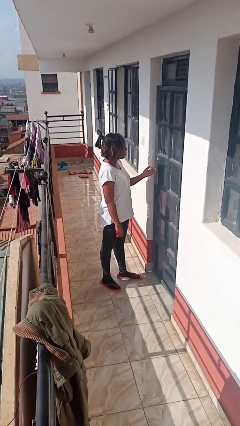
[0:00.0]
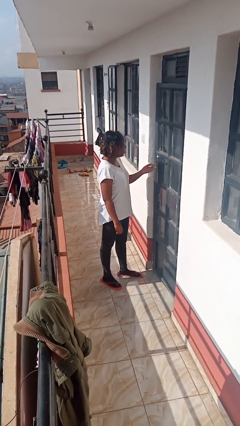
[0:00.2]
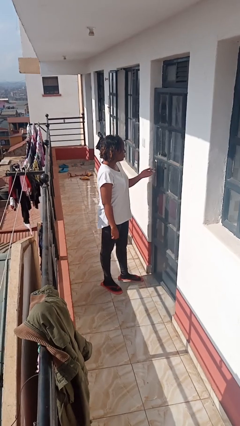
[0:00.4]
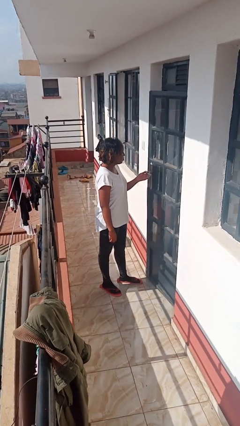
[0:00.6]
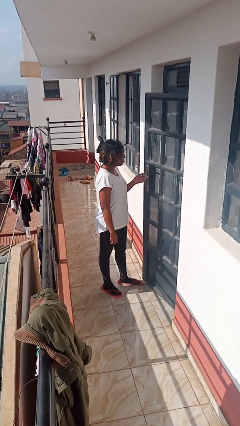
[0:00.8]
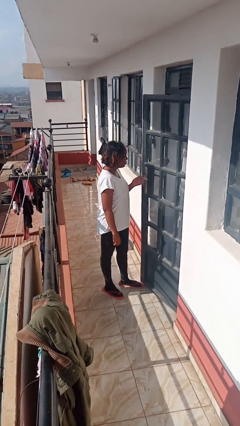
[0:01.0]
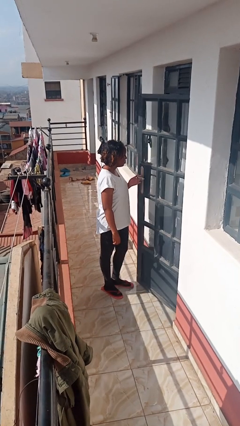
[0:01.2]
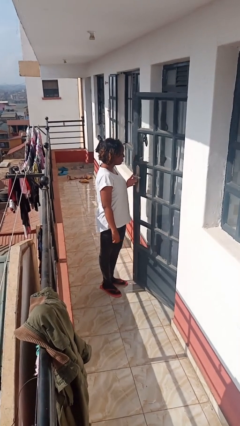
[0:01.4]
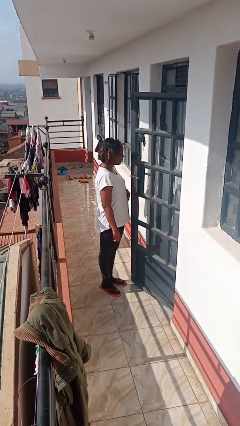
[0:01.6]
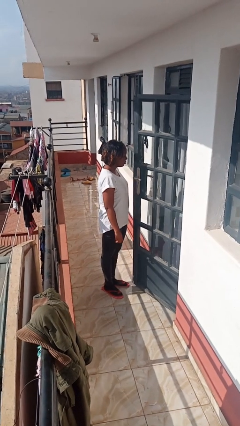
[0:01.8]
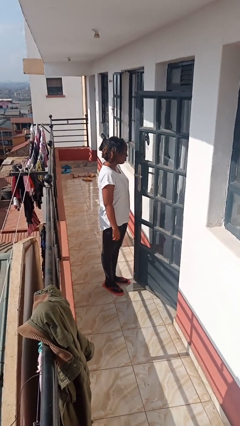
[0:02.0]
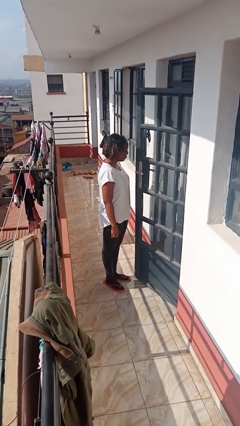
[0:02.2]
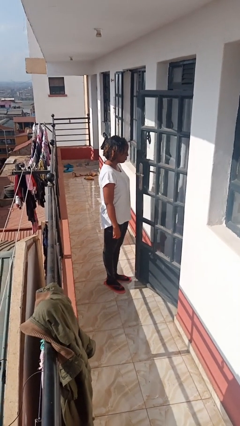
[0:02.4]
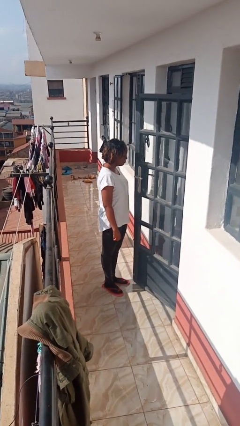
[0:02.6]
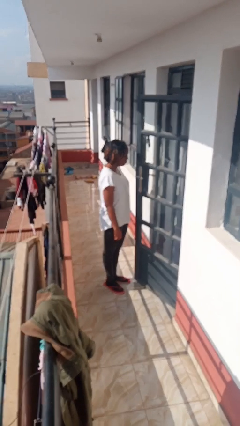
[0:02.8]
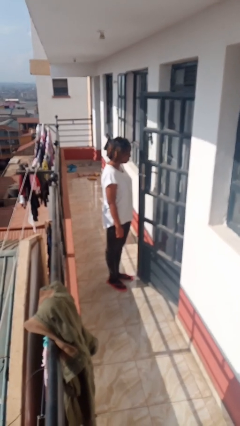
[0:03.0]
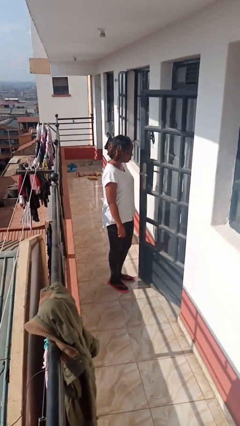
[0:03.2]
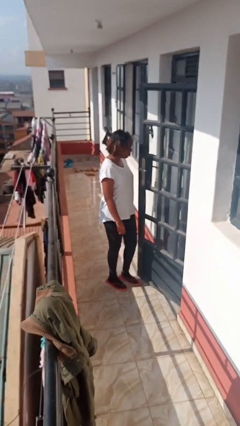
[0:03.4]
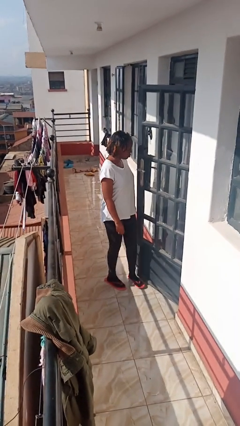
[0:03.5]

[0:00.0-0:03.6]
person opens facility door

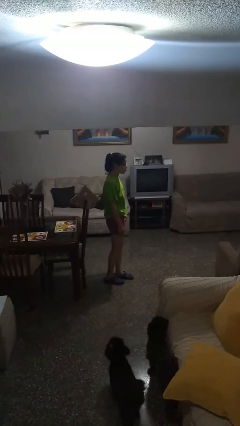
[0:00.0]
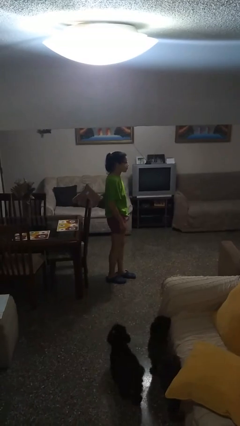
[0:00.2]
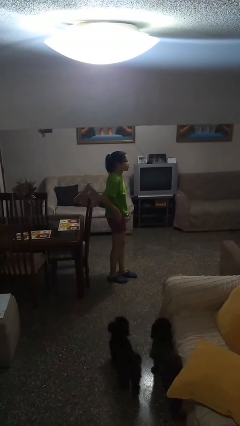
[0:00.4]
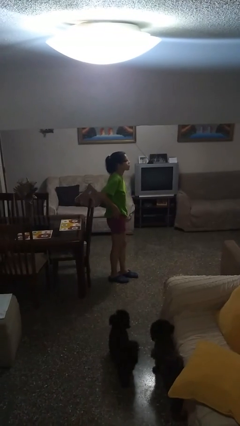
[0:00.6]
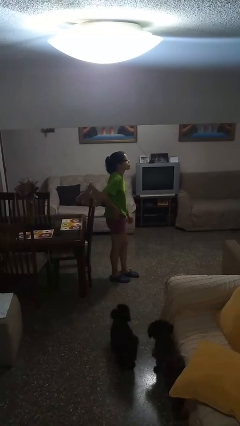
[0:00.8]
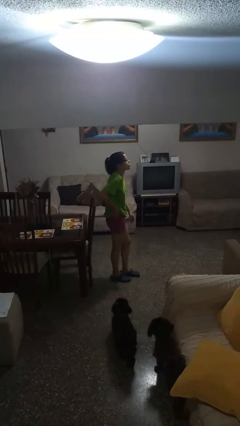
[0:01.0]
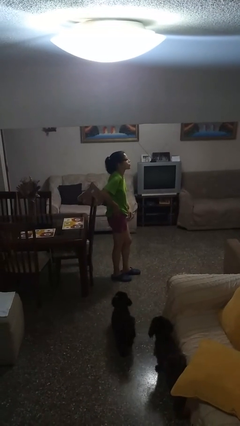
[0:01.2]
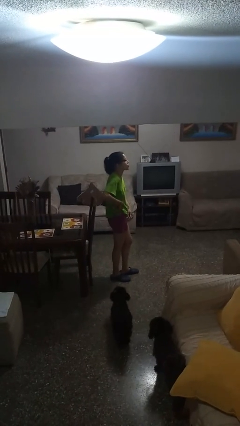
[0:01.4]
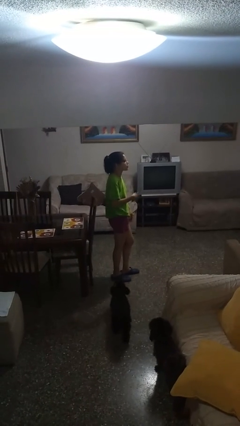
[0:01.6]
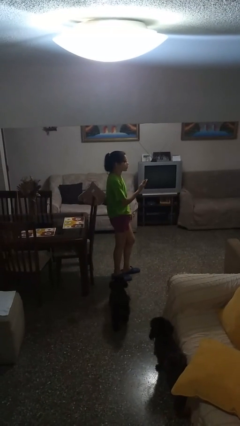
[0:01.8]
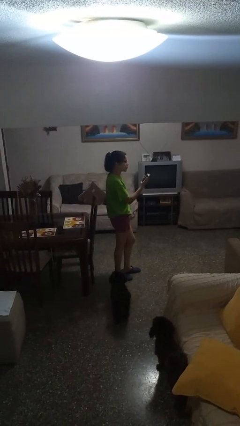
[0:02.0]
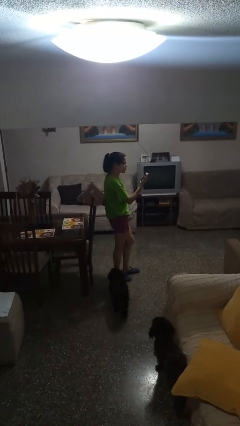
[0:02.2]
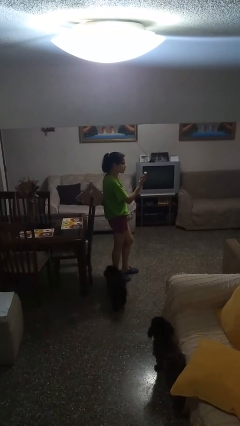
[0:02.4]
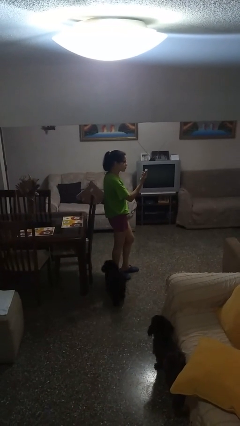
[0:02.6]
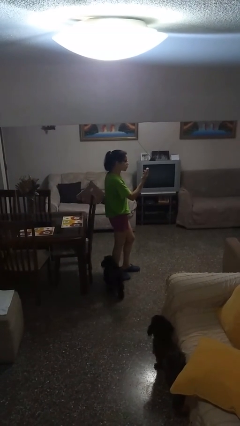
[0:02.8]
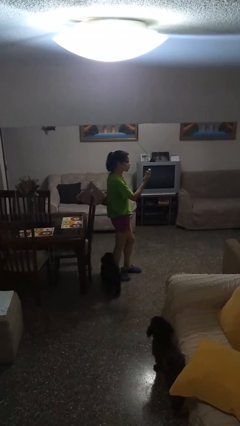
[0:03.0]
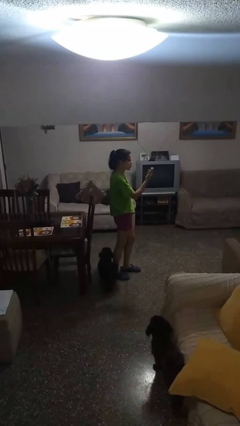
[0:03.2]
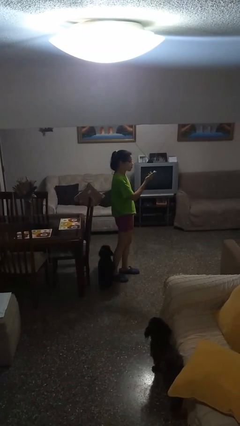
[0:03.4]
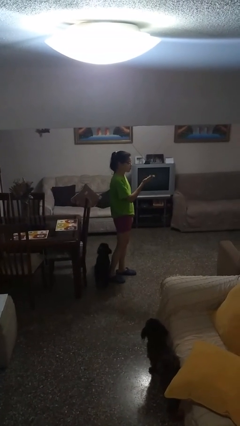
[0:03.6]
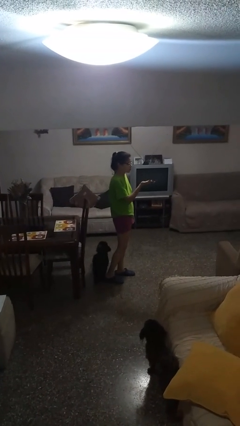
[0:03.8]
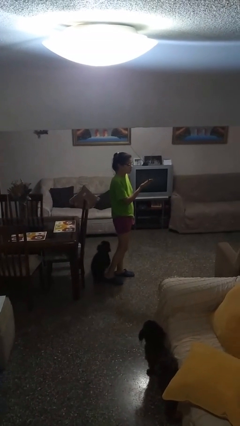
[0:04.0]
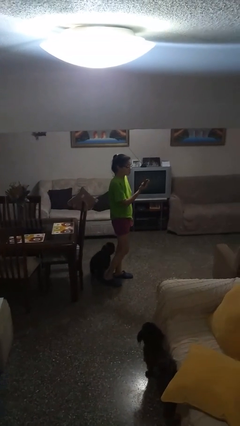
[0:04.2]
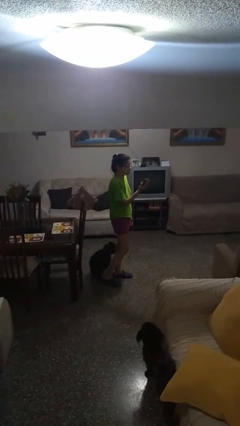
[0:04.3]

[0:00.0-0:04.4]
person takes phone from pocket

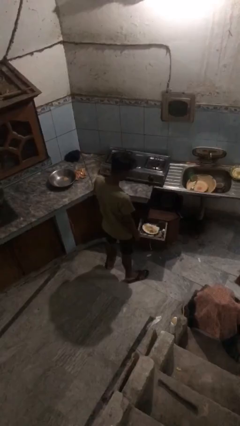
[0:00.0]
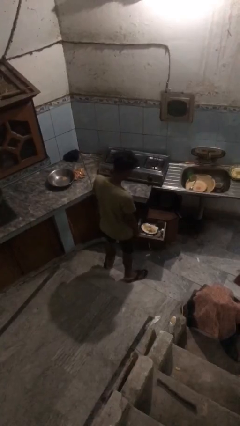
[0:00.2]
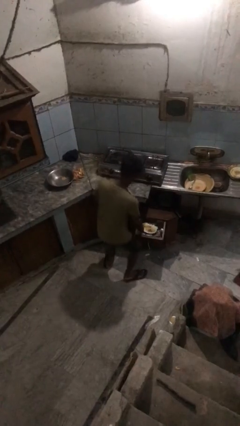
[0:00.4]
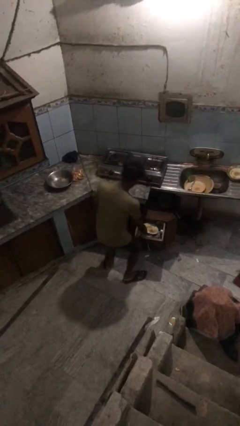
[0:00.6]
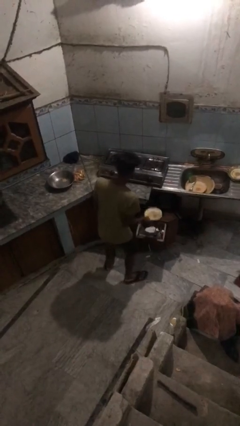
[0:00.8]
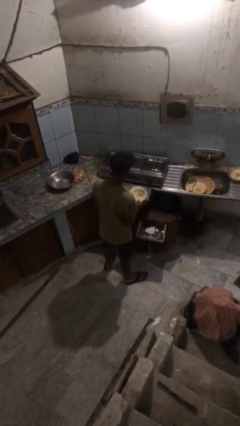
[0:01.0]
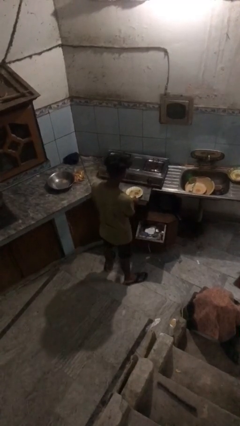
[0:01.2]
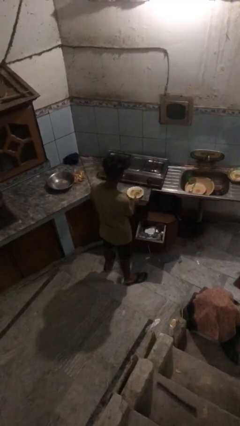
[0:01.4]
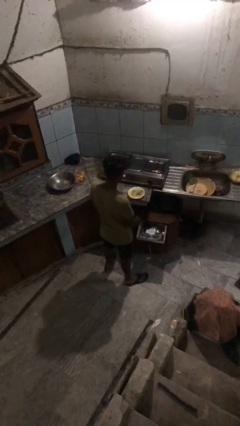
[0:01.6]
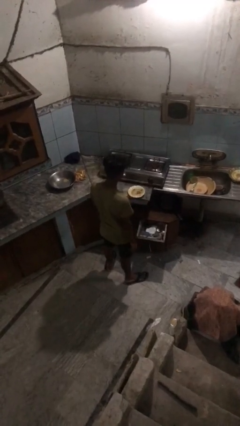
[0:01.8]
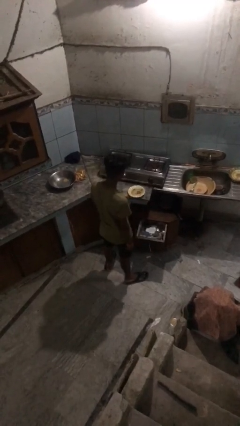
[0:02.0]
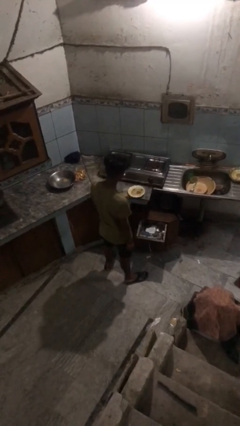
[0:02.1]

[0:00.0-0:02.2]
person takes object from kitchen drawer

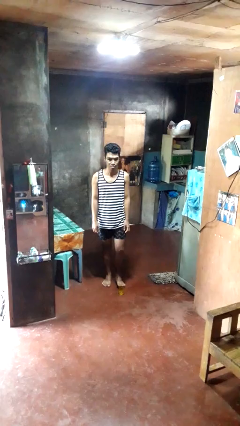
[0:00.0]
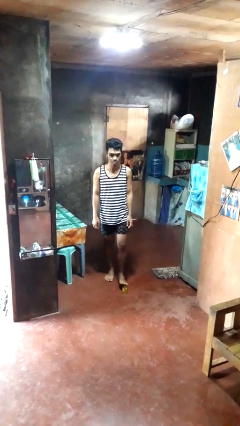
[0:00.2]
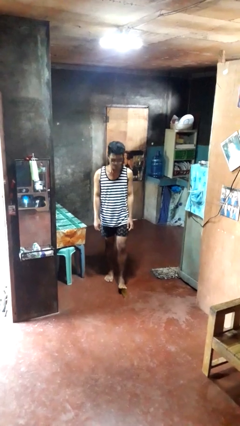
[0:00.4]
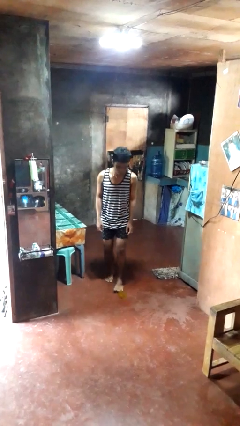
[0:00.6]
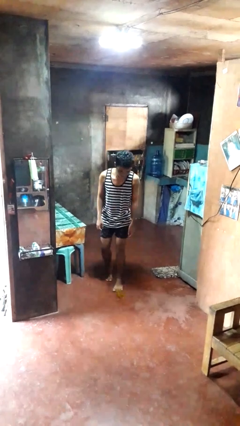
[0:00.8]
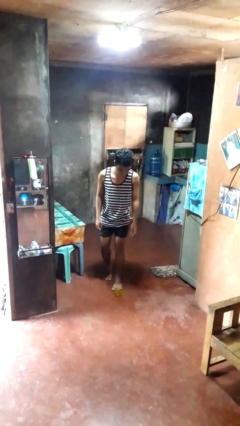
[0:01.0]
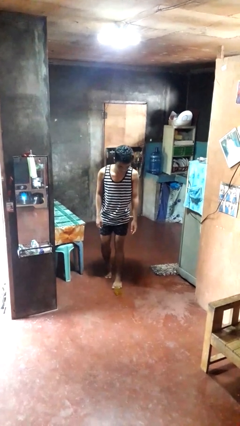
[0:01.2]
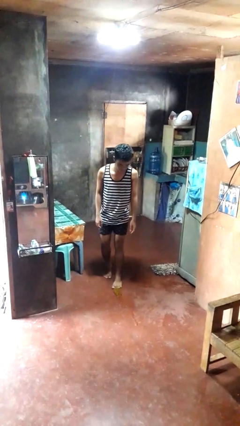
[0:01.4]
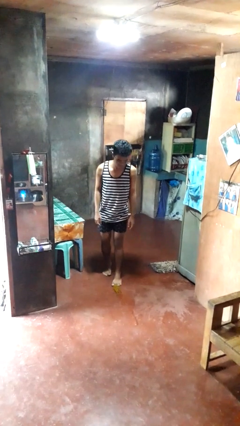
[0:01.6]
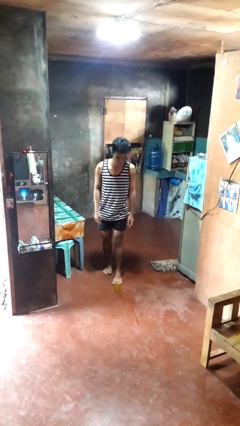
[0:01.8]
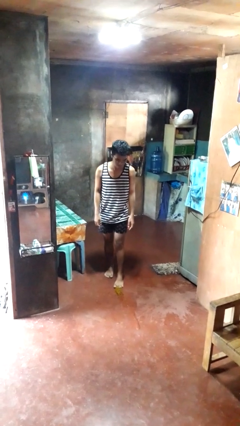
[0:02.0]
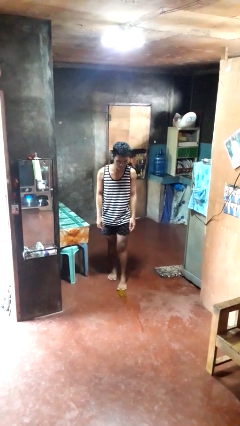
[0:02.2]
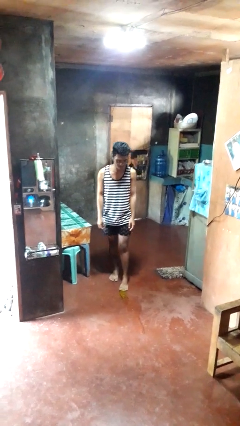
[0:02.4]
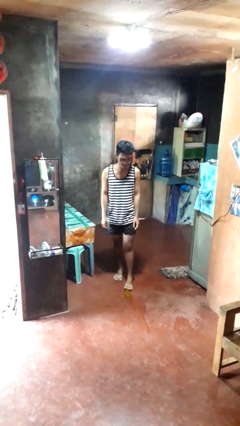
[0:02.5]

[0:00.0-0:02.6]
person spills on floor

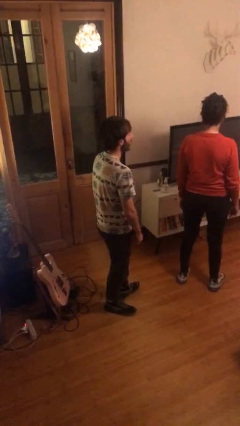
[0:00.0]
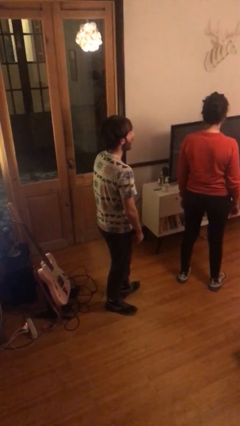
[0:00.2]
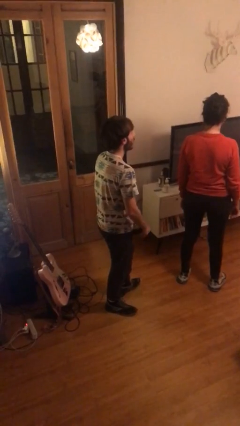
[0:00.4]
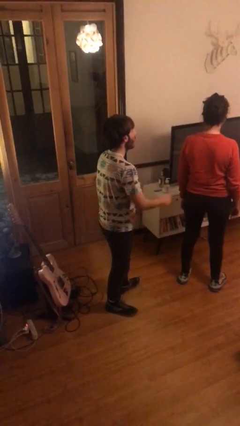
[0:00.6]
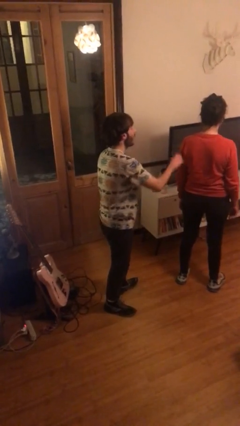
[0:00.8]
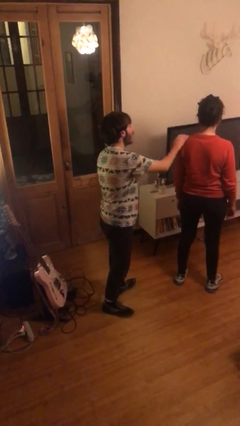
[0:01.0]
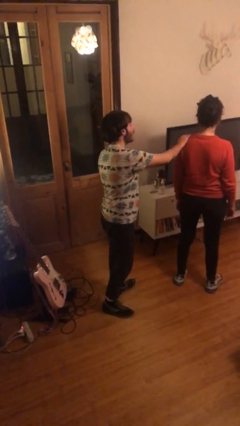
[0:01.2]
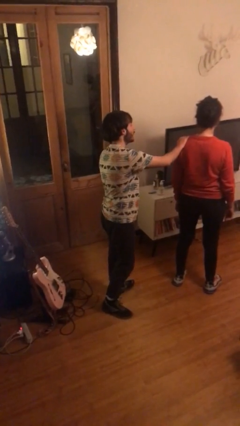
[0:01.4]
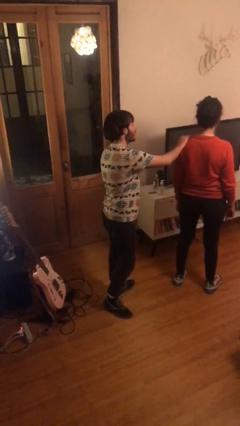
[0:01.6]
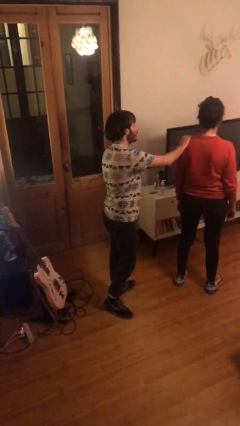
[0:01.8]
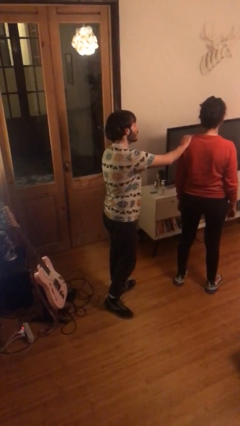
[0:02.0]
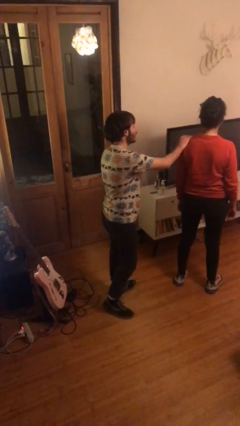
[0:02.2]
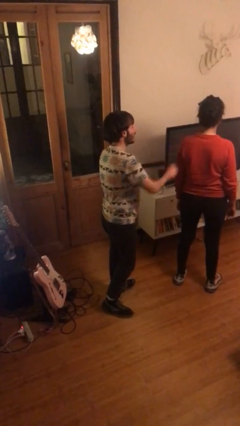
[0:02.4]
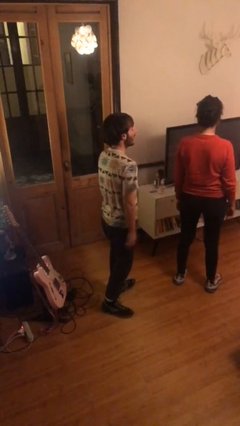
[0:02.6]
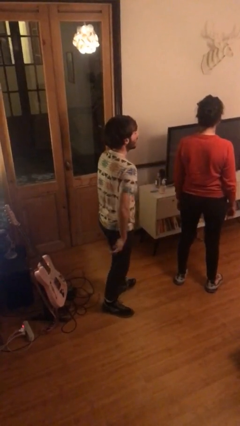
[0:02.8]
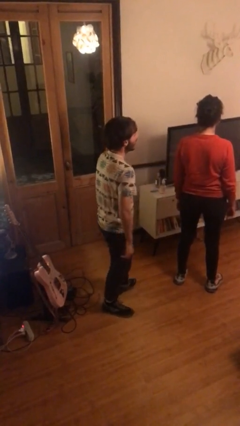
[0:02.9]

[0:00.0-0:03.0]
person touches back of person

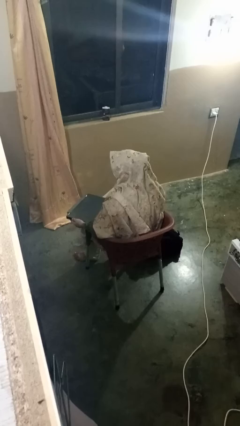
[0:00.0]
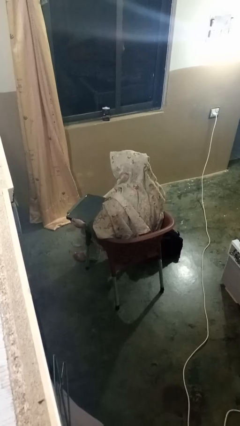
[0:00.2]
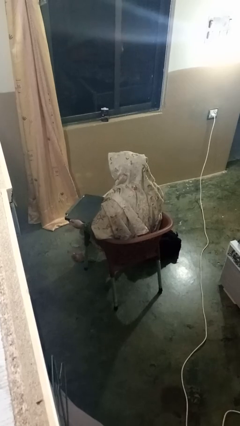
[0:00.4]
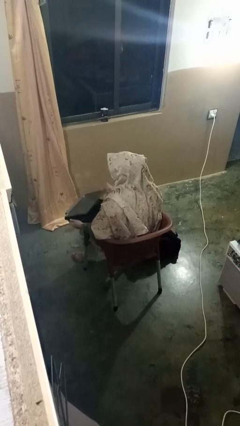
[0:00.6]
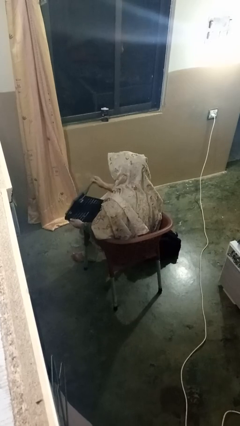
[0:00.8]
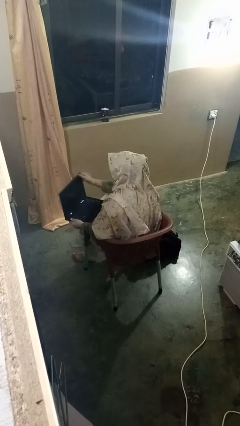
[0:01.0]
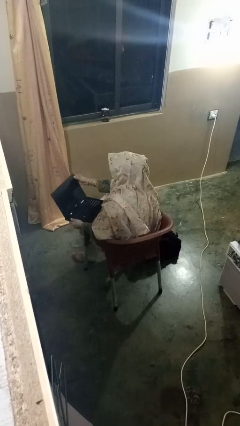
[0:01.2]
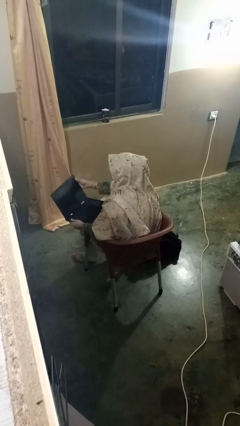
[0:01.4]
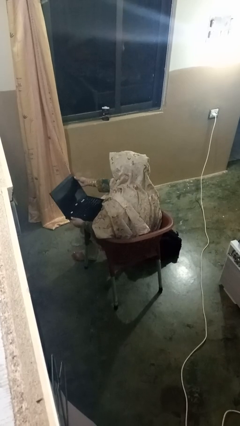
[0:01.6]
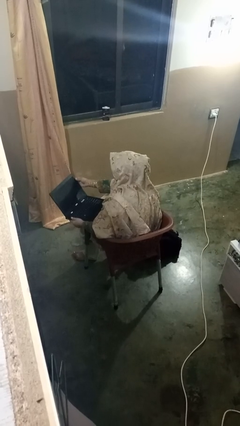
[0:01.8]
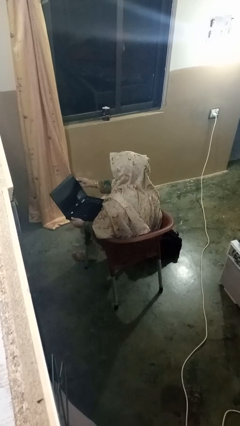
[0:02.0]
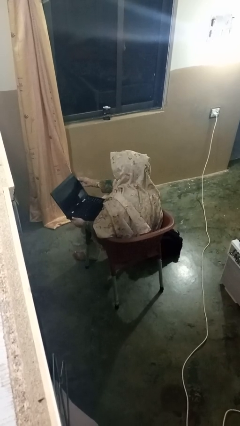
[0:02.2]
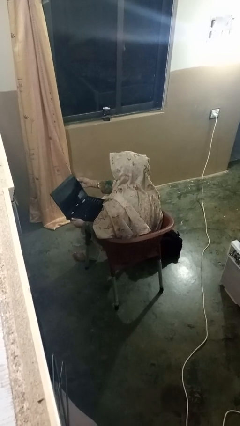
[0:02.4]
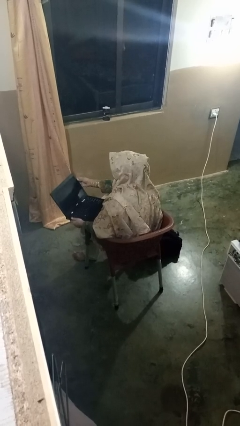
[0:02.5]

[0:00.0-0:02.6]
person opens laptop
